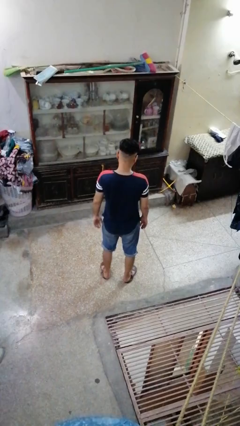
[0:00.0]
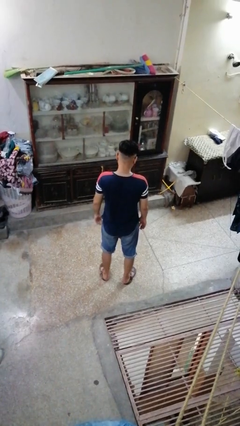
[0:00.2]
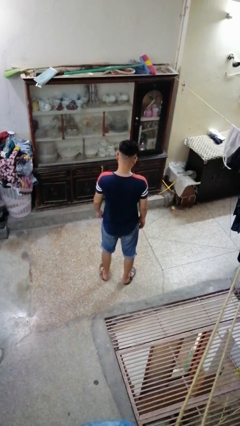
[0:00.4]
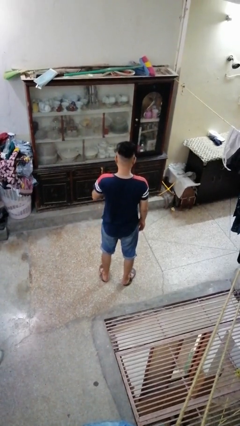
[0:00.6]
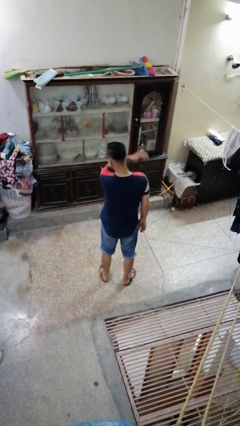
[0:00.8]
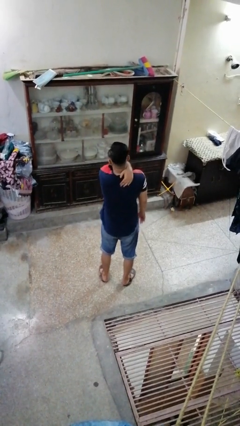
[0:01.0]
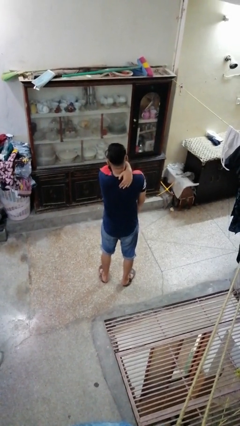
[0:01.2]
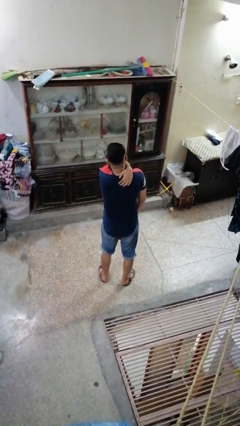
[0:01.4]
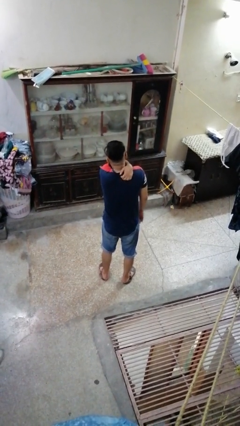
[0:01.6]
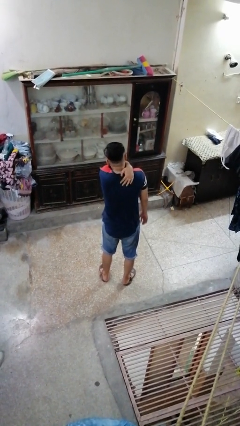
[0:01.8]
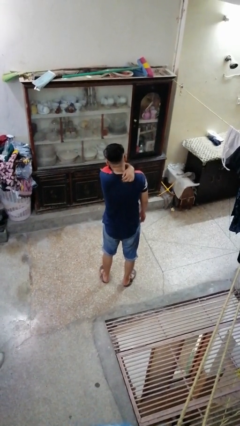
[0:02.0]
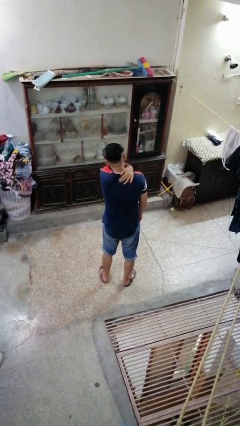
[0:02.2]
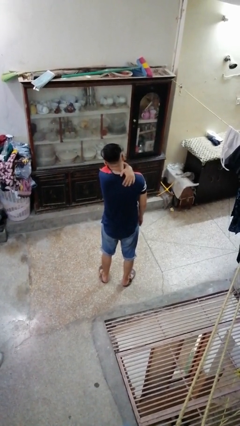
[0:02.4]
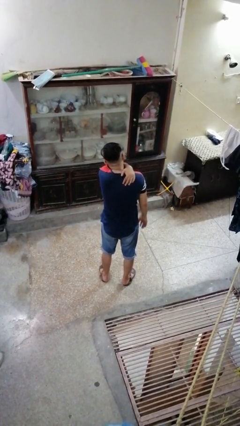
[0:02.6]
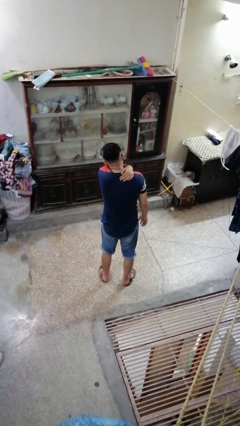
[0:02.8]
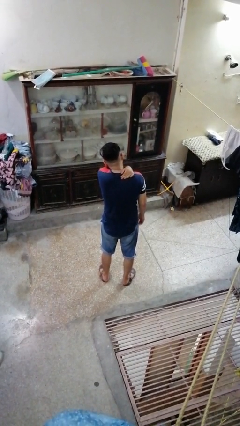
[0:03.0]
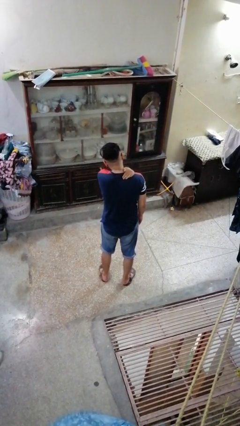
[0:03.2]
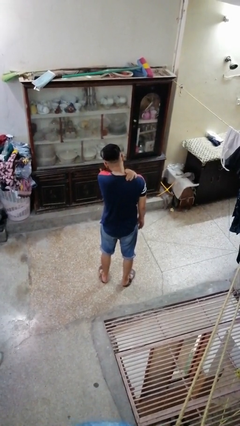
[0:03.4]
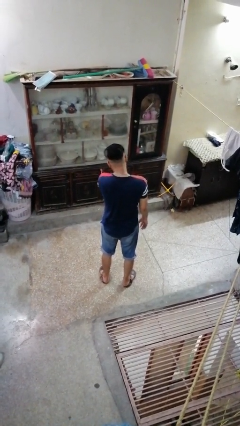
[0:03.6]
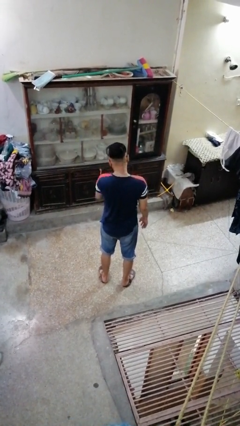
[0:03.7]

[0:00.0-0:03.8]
person swats bug

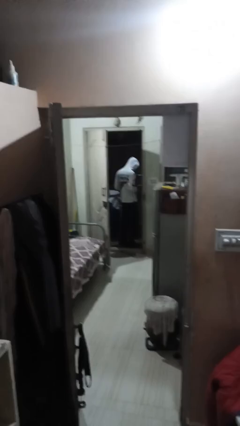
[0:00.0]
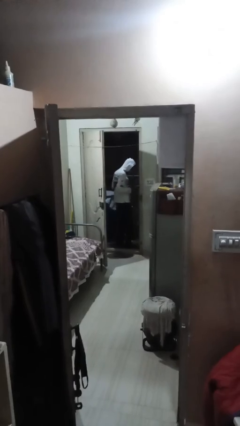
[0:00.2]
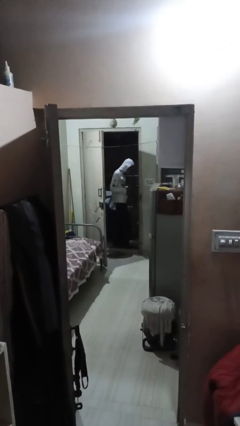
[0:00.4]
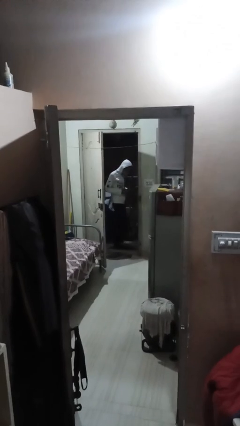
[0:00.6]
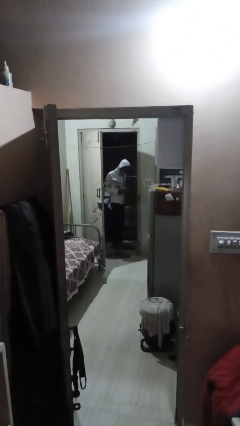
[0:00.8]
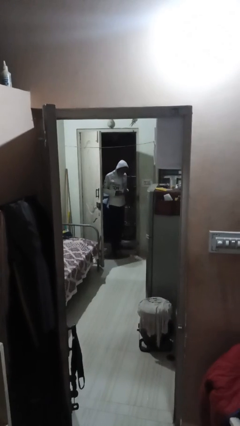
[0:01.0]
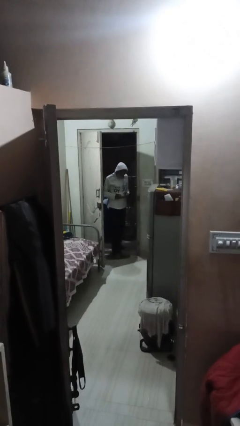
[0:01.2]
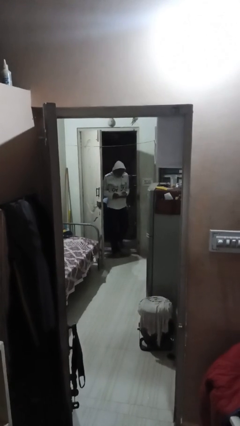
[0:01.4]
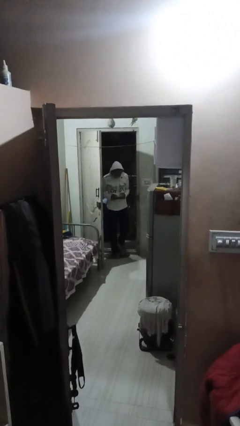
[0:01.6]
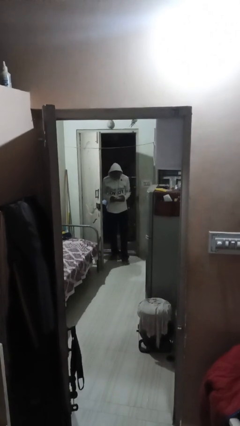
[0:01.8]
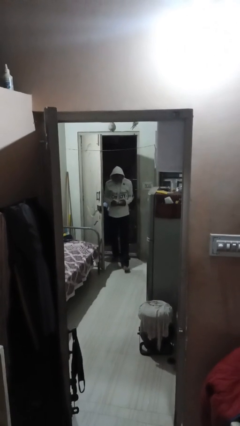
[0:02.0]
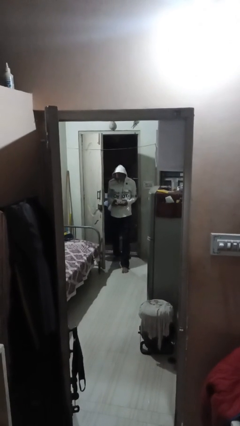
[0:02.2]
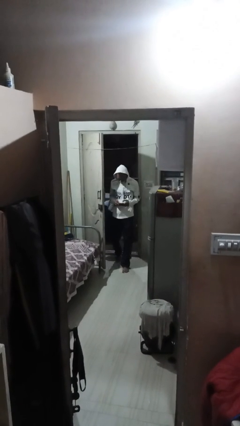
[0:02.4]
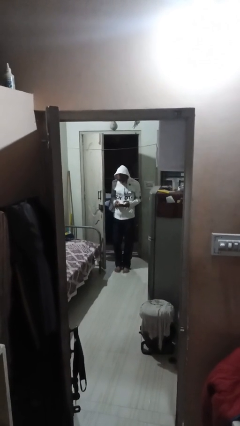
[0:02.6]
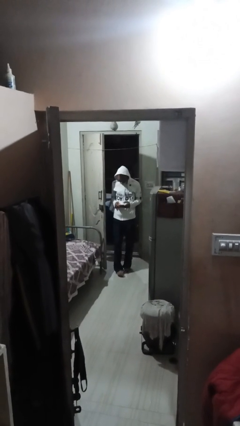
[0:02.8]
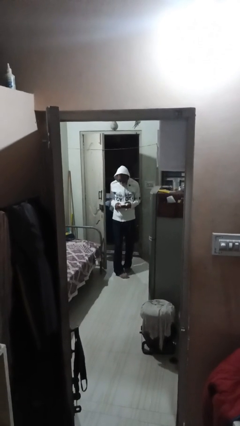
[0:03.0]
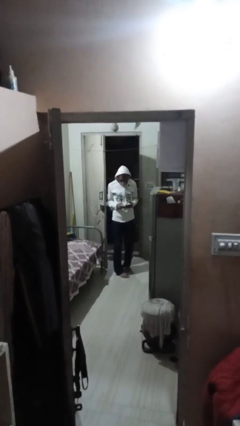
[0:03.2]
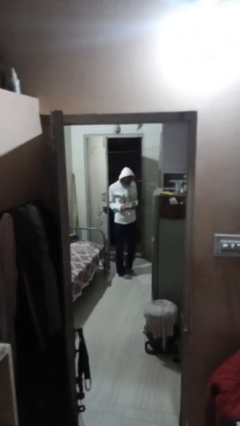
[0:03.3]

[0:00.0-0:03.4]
person enters scene through structure

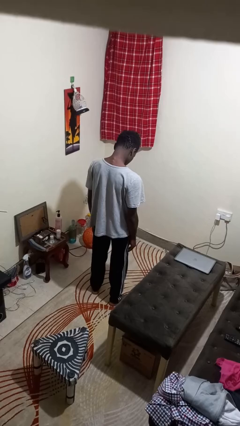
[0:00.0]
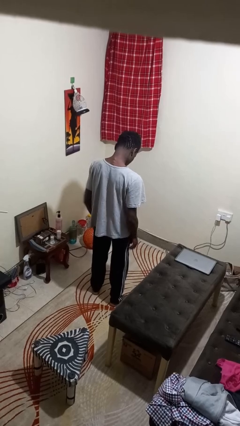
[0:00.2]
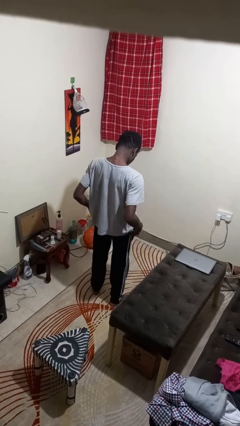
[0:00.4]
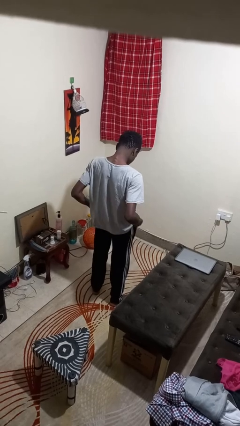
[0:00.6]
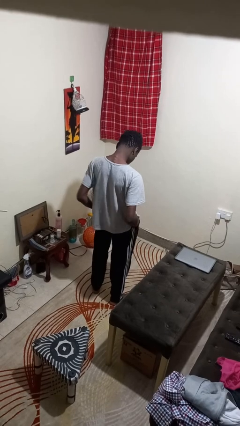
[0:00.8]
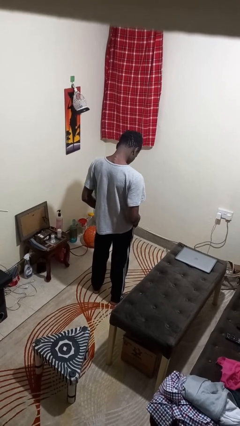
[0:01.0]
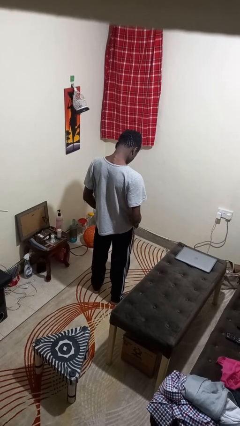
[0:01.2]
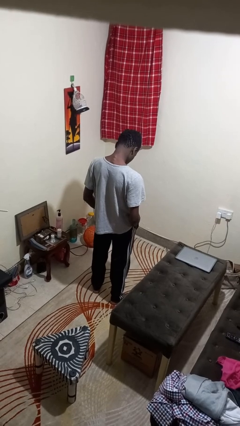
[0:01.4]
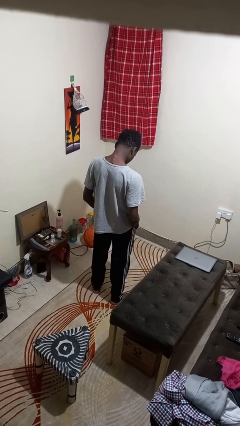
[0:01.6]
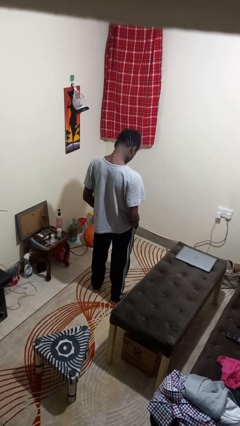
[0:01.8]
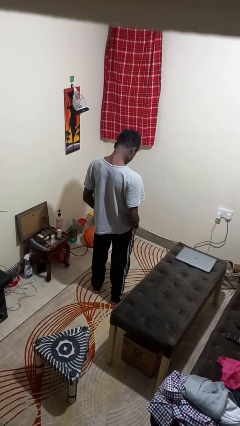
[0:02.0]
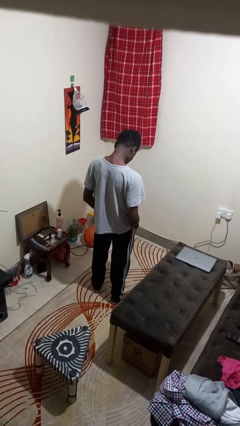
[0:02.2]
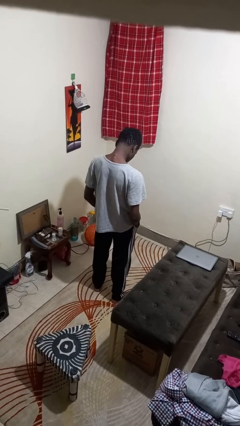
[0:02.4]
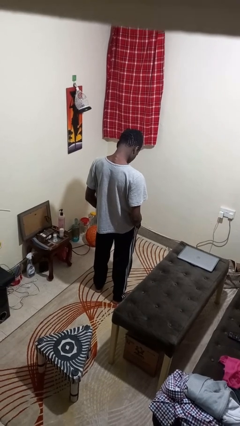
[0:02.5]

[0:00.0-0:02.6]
person puts hands in back pockets

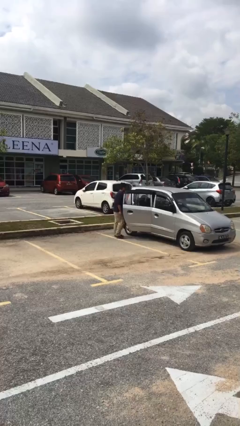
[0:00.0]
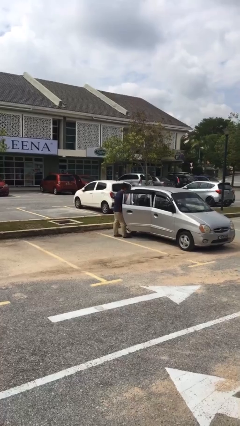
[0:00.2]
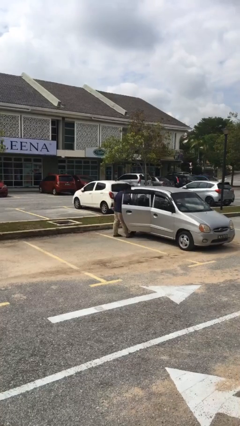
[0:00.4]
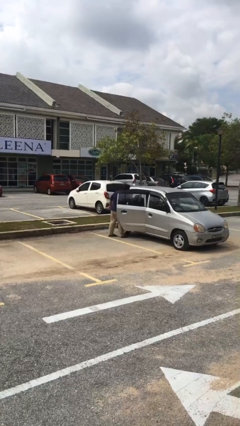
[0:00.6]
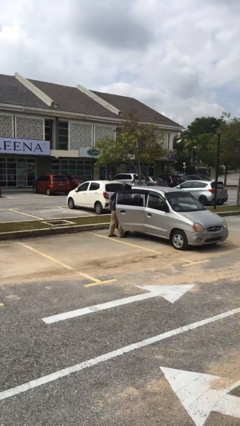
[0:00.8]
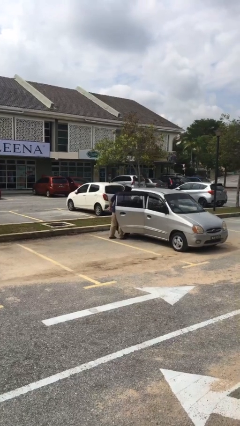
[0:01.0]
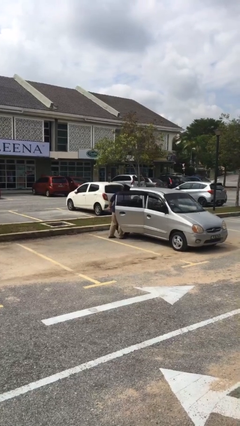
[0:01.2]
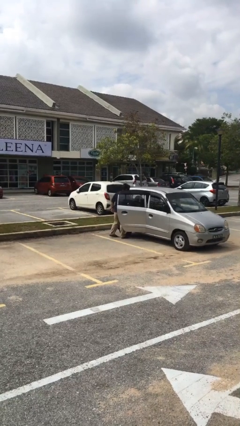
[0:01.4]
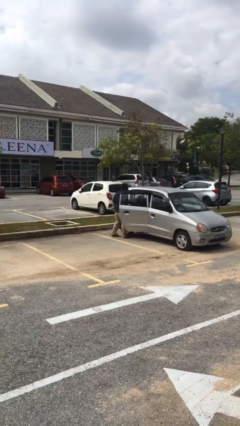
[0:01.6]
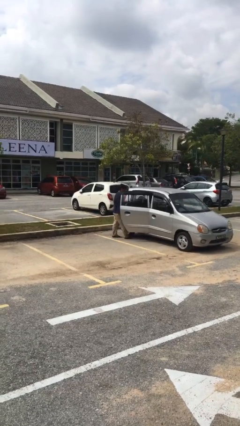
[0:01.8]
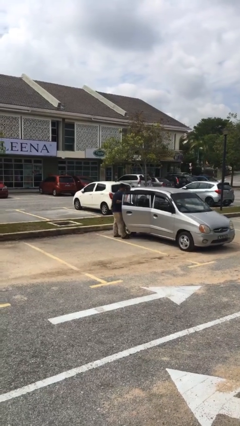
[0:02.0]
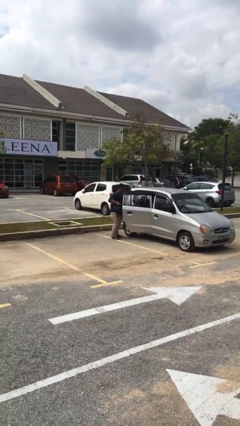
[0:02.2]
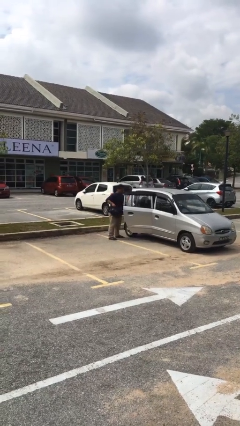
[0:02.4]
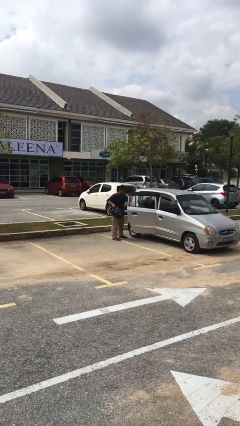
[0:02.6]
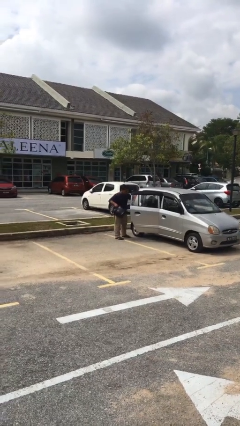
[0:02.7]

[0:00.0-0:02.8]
person unloads car

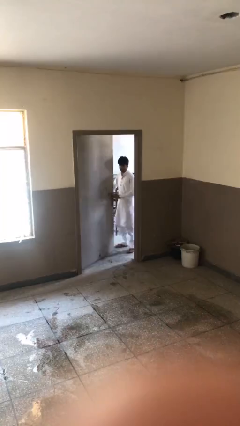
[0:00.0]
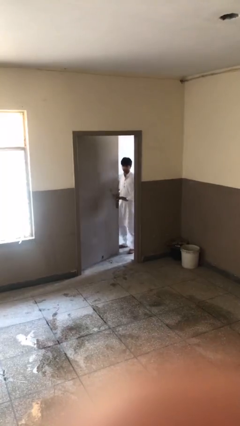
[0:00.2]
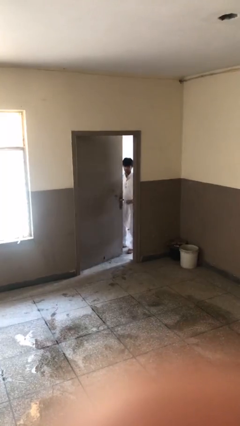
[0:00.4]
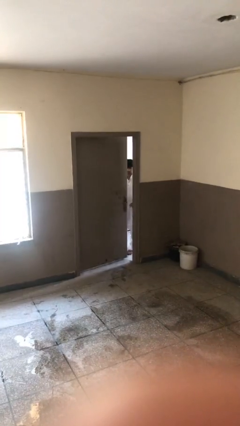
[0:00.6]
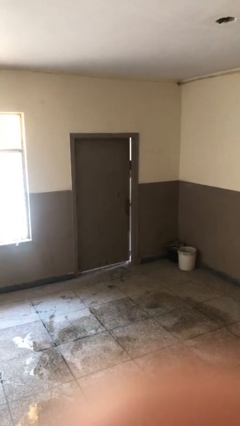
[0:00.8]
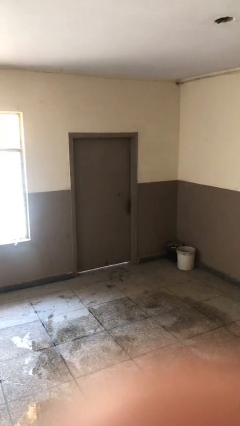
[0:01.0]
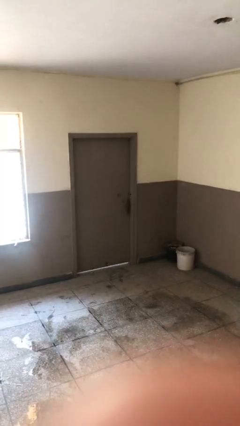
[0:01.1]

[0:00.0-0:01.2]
person closes facility door

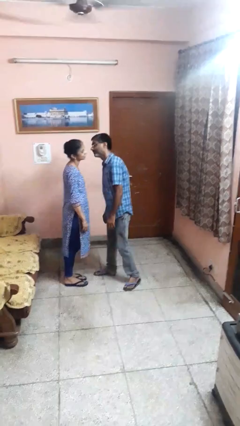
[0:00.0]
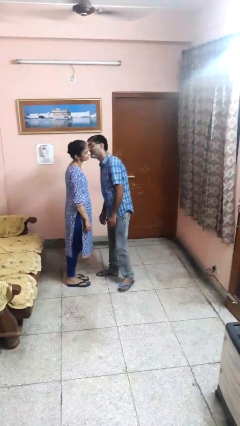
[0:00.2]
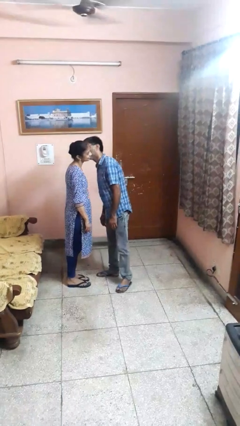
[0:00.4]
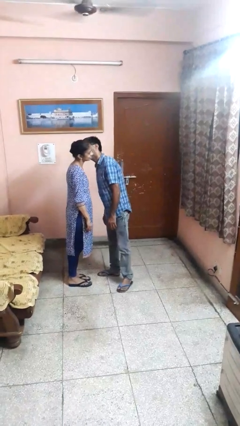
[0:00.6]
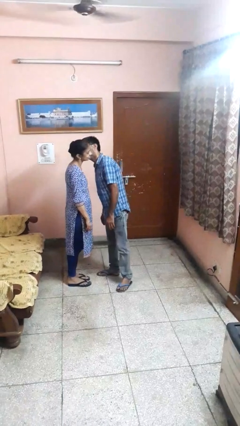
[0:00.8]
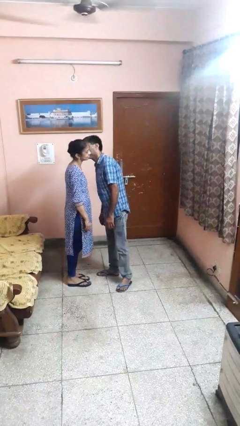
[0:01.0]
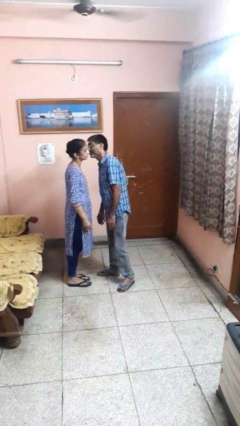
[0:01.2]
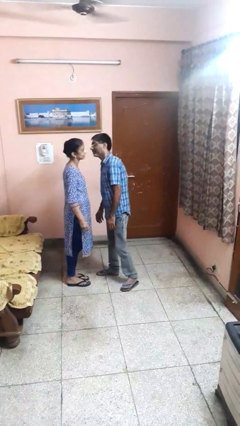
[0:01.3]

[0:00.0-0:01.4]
person kisses cheek of person

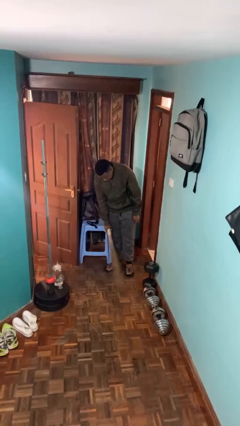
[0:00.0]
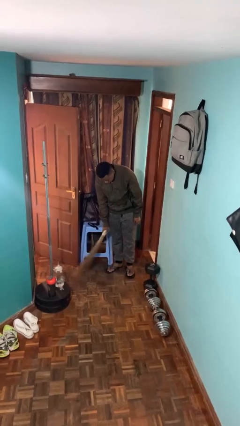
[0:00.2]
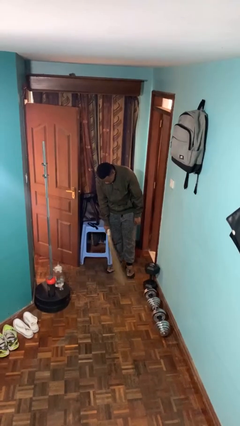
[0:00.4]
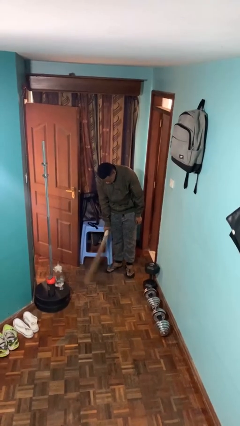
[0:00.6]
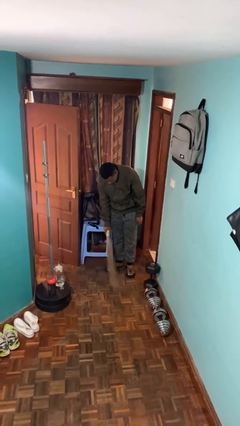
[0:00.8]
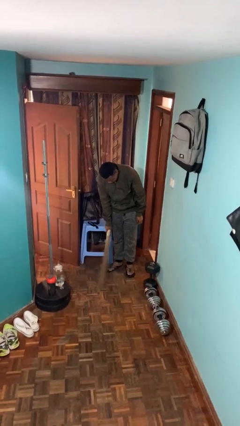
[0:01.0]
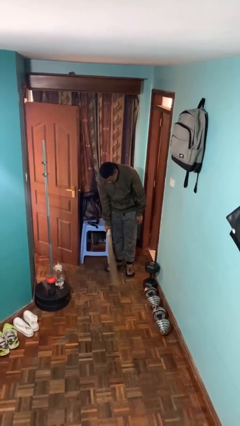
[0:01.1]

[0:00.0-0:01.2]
person sweeps floor

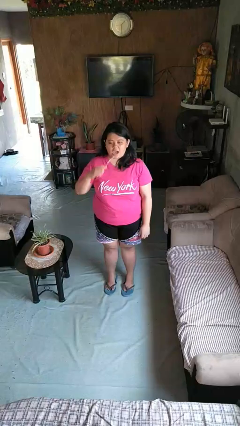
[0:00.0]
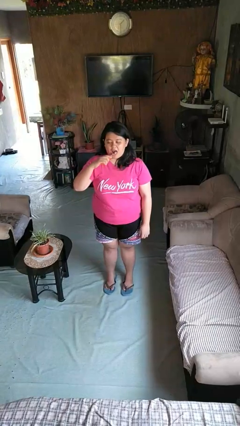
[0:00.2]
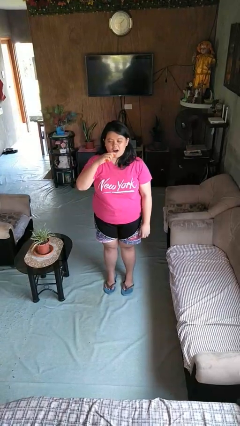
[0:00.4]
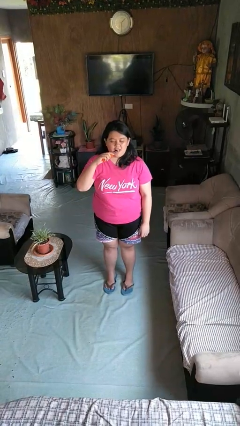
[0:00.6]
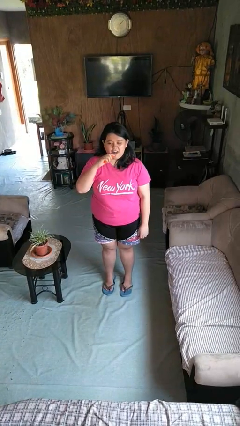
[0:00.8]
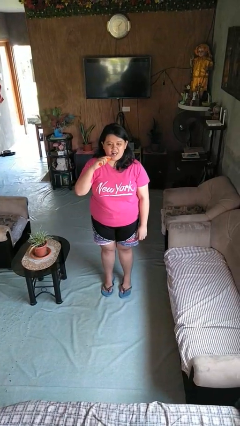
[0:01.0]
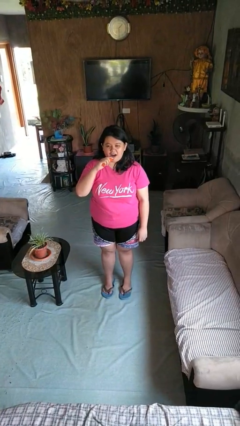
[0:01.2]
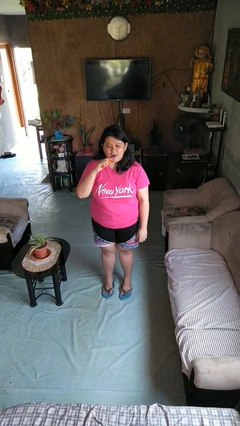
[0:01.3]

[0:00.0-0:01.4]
person brushes teeth
